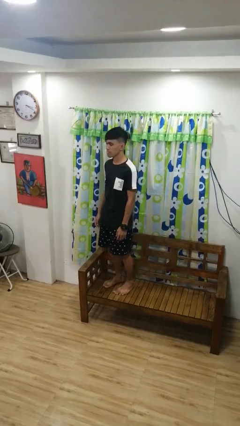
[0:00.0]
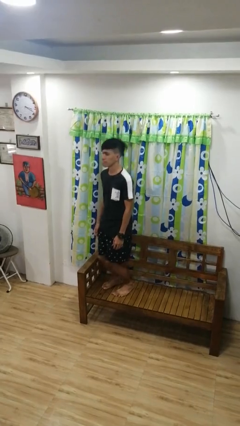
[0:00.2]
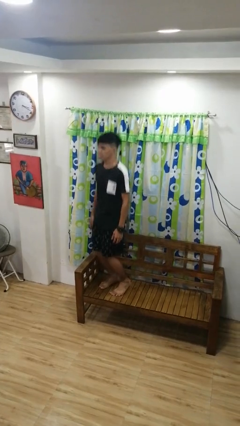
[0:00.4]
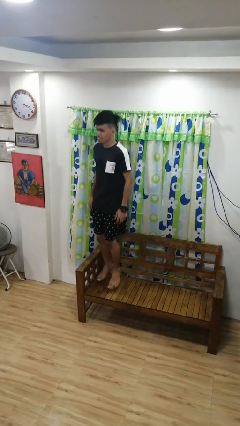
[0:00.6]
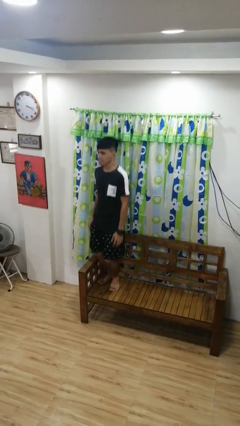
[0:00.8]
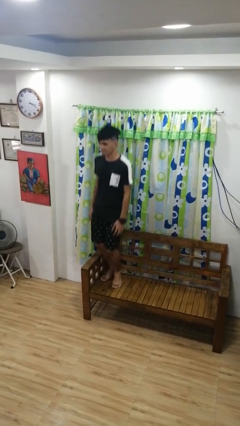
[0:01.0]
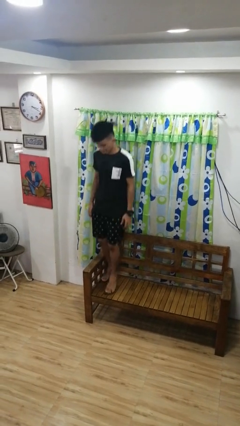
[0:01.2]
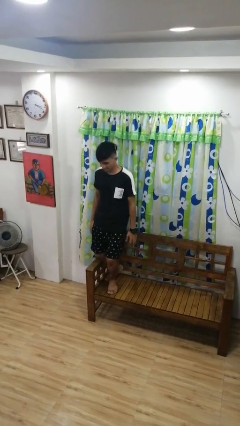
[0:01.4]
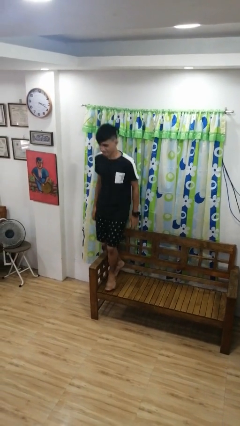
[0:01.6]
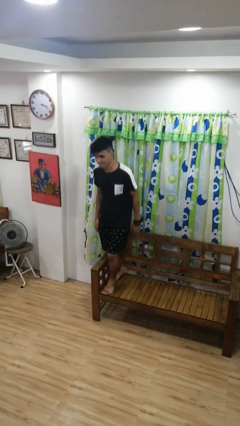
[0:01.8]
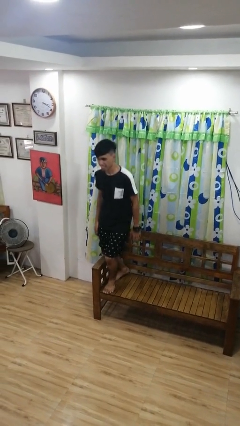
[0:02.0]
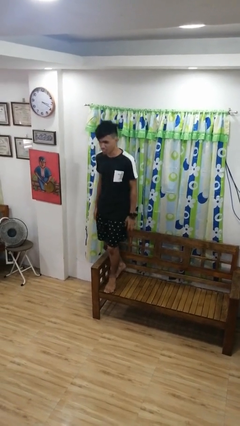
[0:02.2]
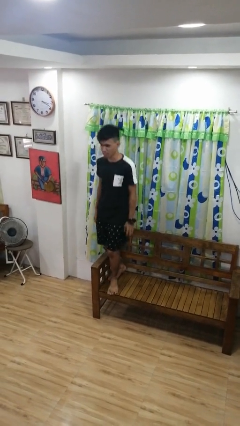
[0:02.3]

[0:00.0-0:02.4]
person jumps on couch

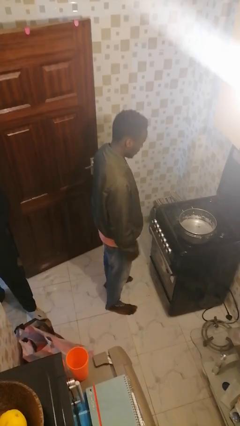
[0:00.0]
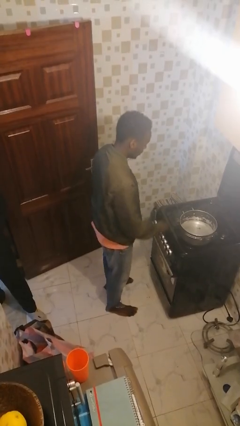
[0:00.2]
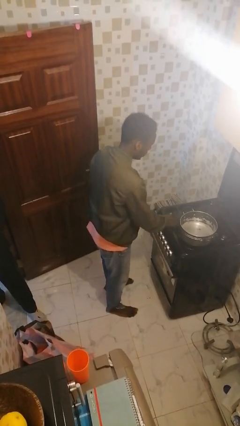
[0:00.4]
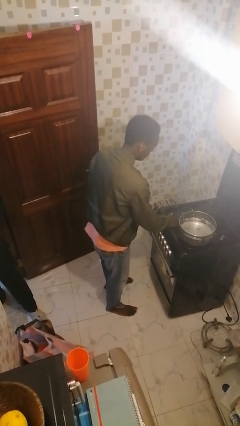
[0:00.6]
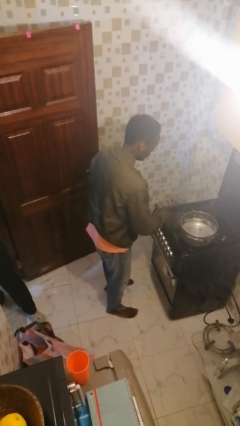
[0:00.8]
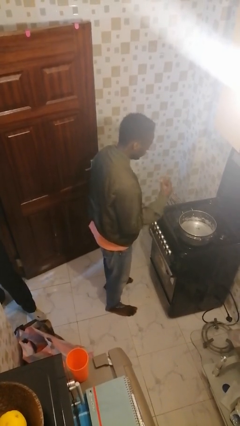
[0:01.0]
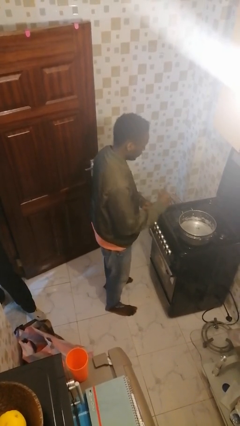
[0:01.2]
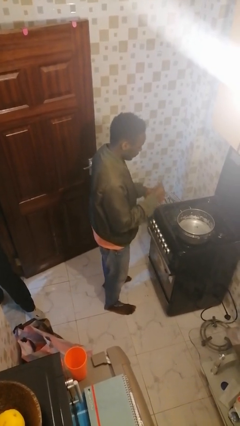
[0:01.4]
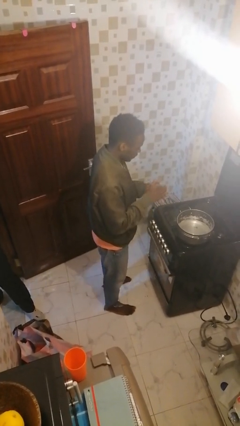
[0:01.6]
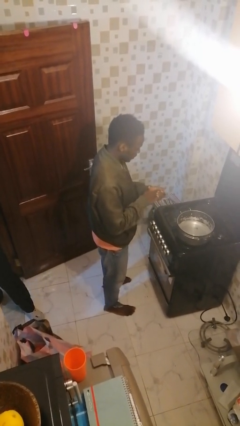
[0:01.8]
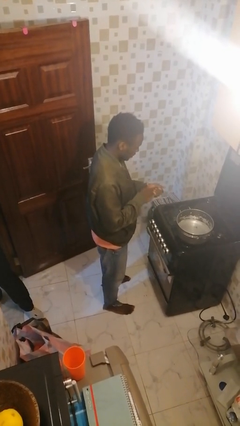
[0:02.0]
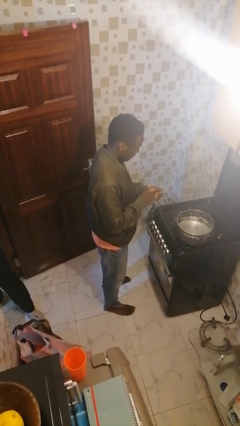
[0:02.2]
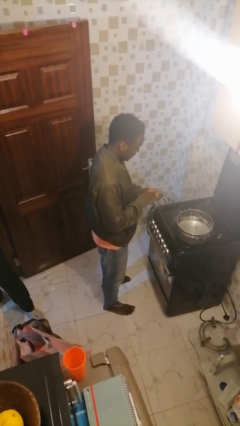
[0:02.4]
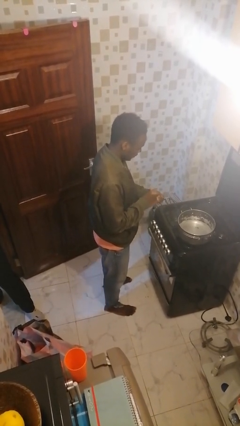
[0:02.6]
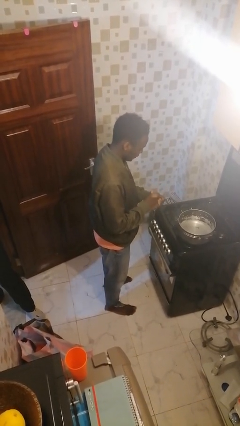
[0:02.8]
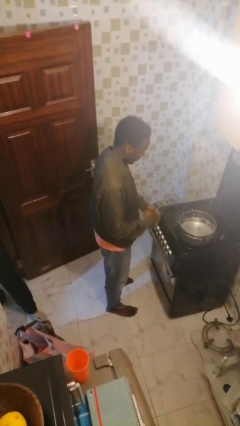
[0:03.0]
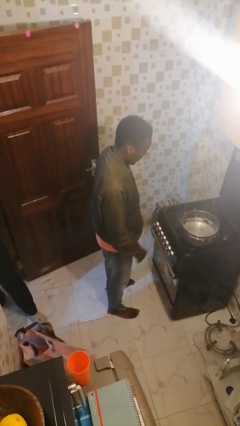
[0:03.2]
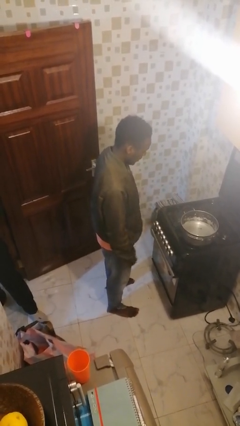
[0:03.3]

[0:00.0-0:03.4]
person burns hand

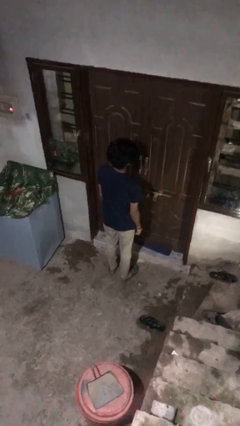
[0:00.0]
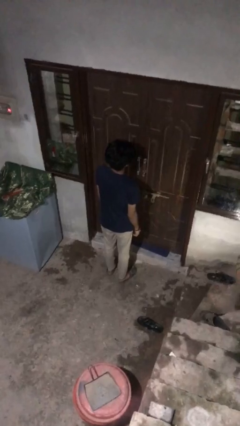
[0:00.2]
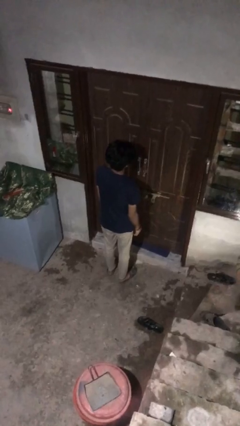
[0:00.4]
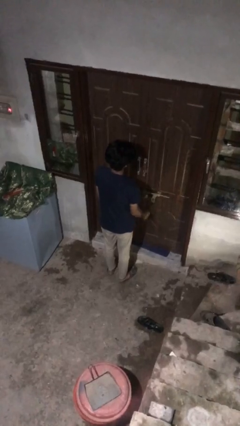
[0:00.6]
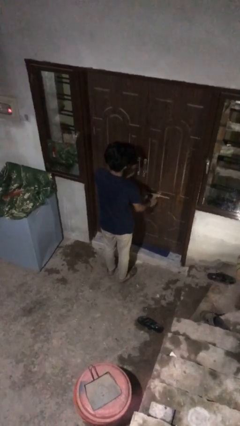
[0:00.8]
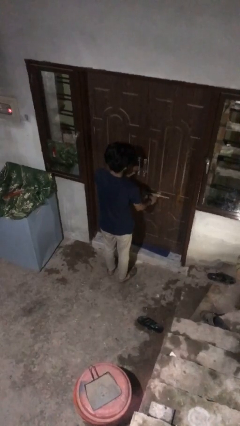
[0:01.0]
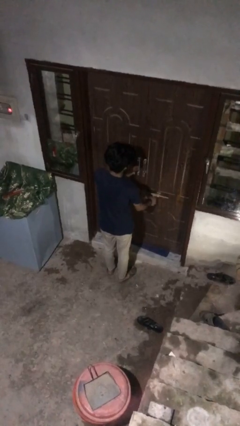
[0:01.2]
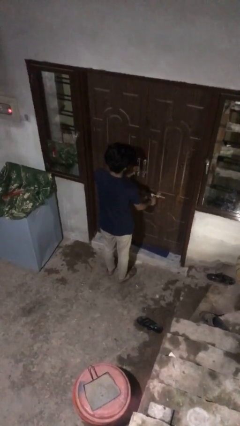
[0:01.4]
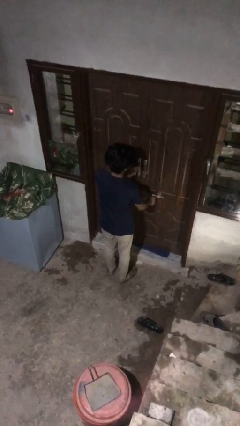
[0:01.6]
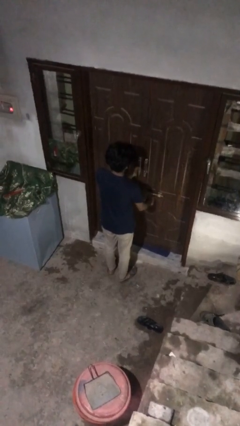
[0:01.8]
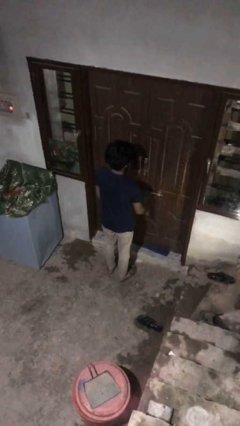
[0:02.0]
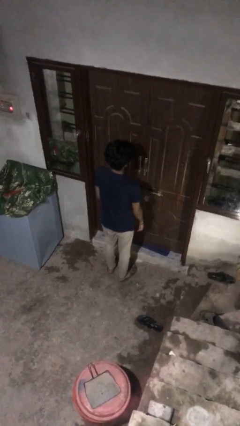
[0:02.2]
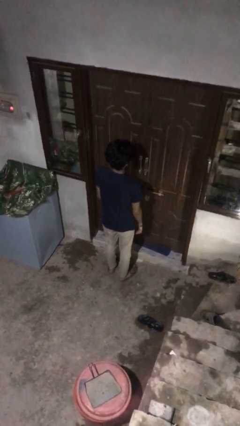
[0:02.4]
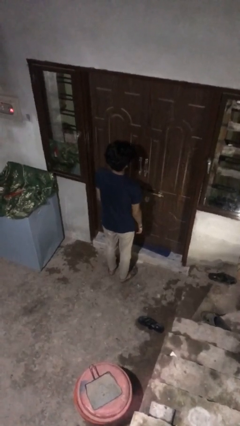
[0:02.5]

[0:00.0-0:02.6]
person locks door with keys

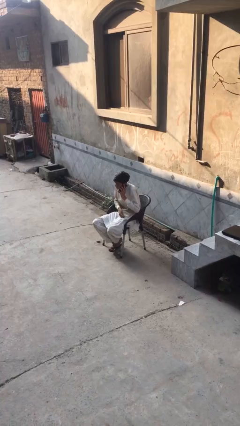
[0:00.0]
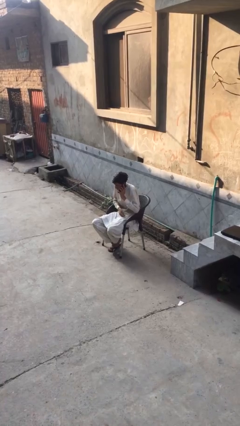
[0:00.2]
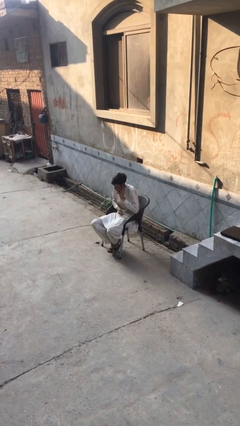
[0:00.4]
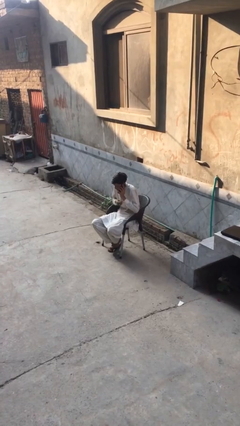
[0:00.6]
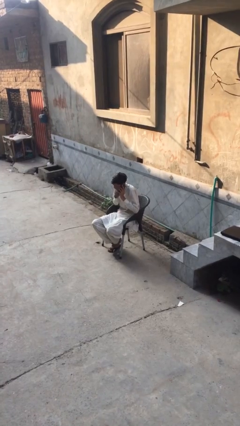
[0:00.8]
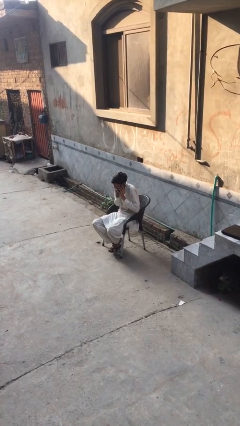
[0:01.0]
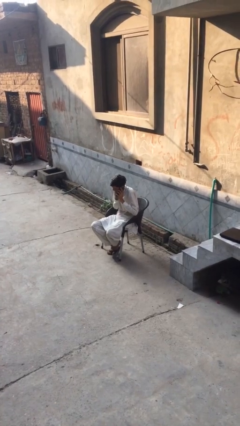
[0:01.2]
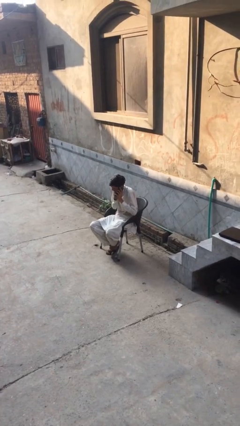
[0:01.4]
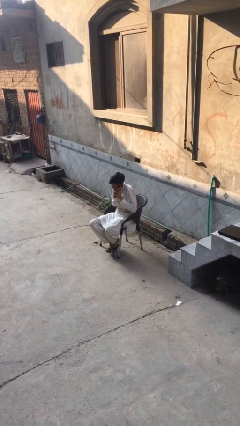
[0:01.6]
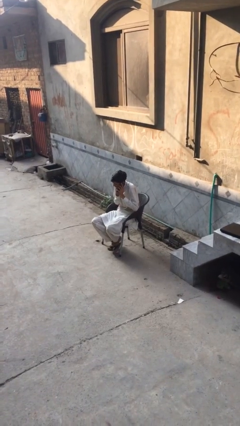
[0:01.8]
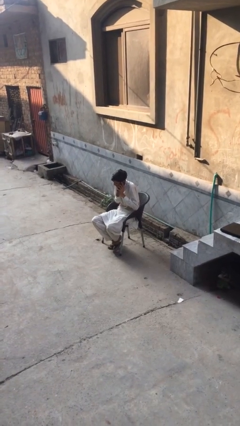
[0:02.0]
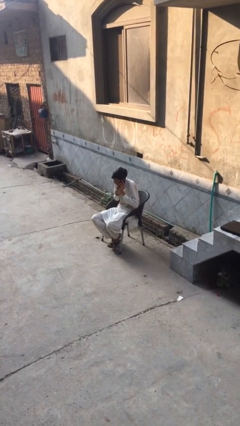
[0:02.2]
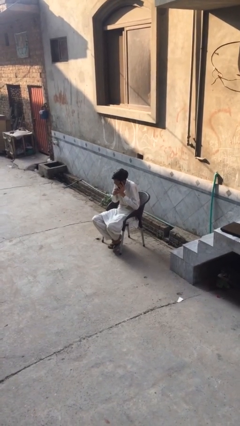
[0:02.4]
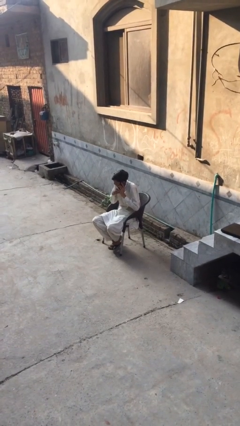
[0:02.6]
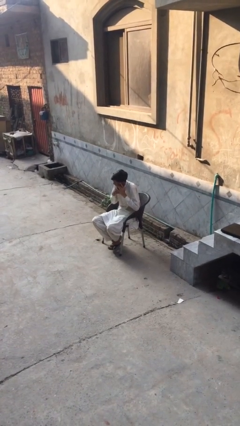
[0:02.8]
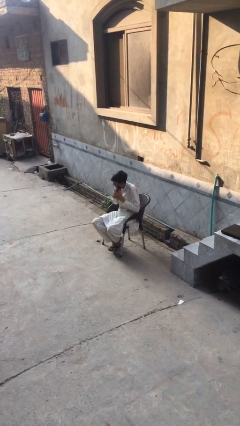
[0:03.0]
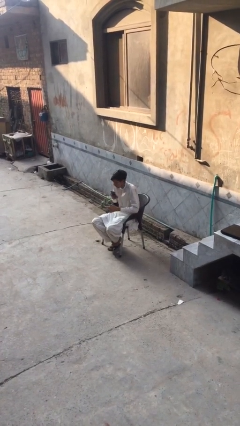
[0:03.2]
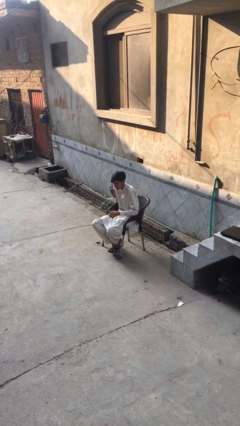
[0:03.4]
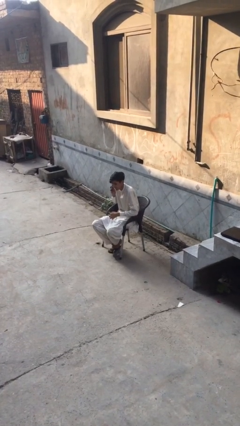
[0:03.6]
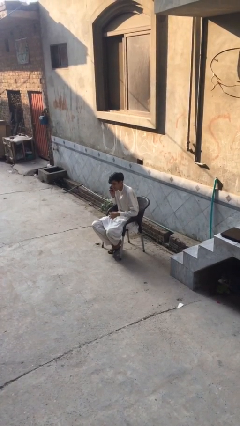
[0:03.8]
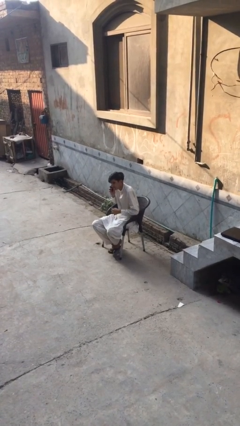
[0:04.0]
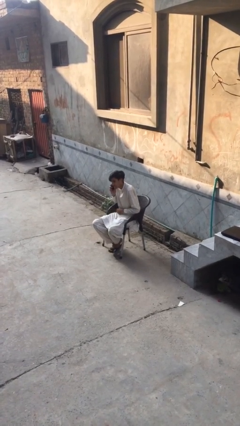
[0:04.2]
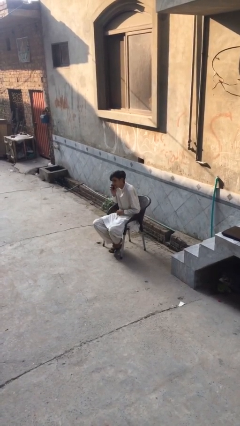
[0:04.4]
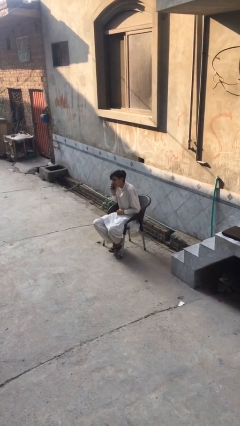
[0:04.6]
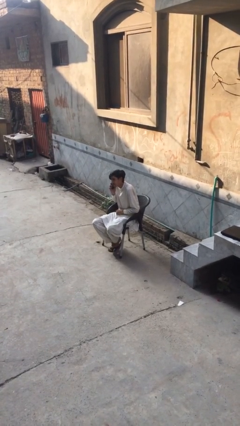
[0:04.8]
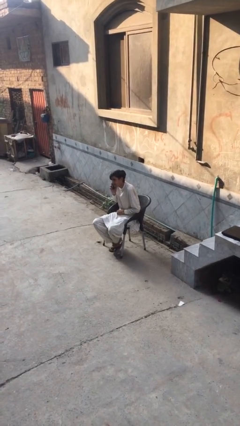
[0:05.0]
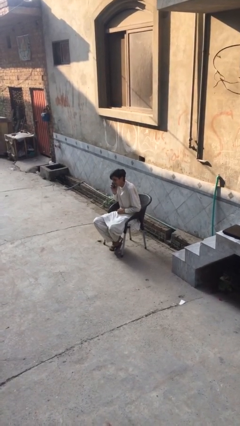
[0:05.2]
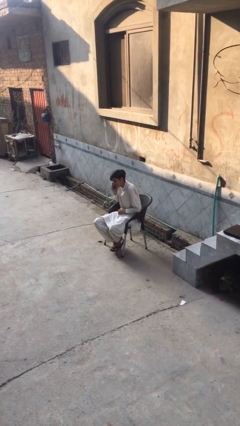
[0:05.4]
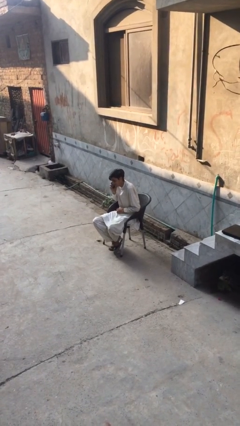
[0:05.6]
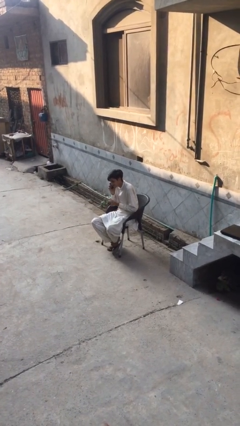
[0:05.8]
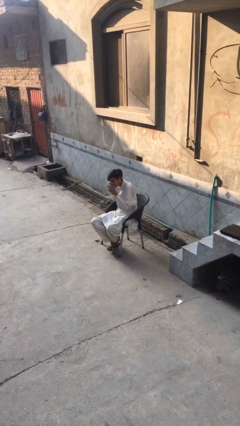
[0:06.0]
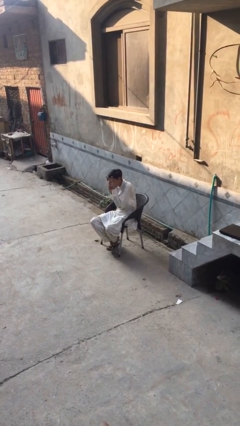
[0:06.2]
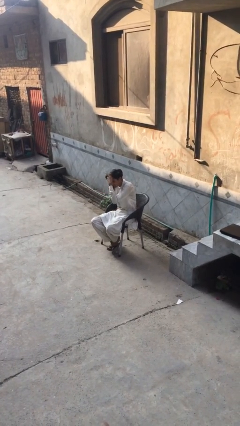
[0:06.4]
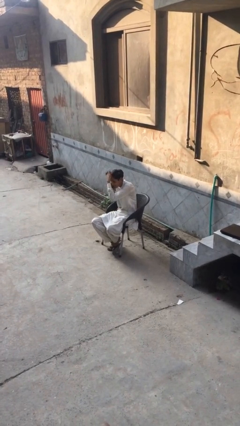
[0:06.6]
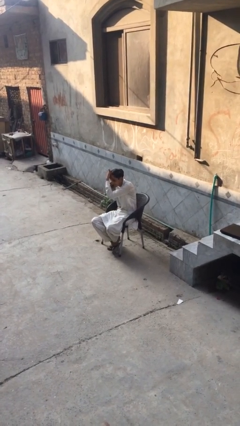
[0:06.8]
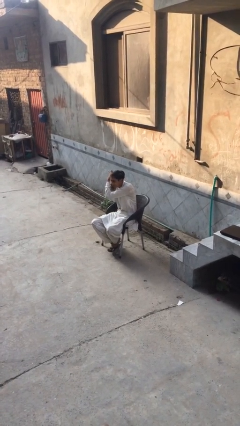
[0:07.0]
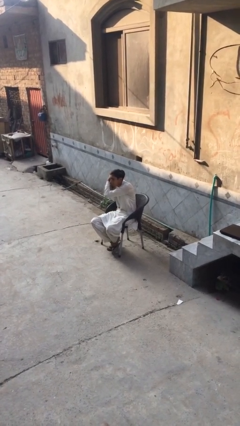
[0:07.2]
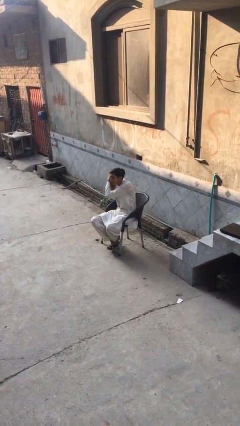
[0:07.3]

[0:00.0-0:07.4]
person talks on phone

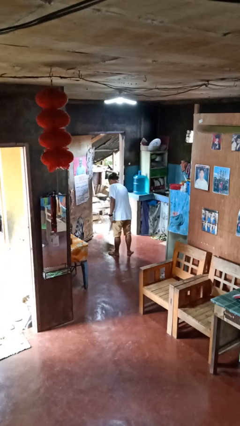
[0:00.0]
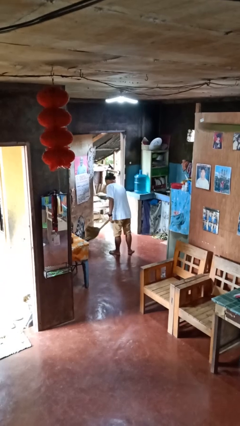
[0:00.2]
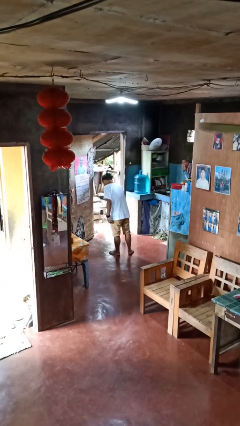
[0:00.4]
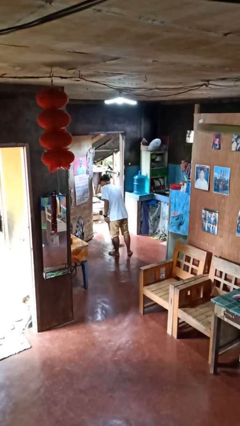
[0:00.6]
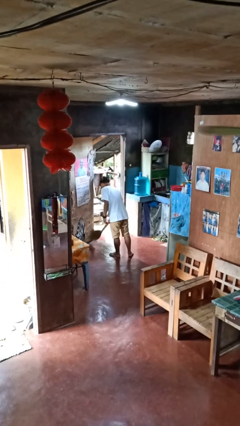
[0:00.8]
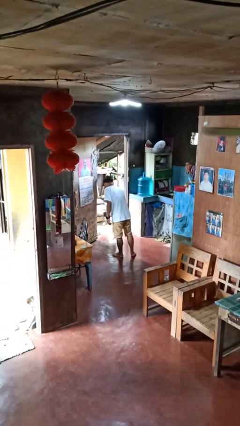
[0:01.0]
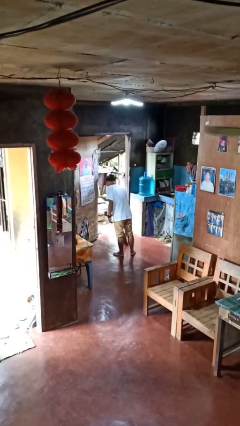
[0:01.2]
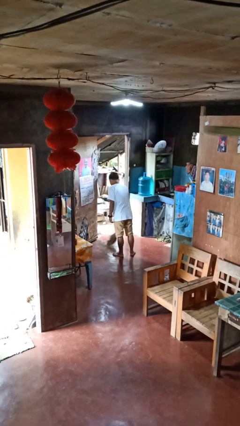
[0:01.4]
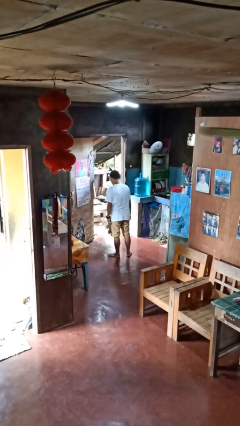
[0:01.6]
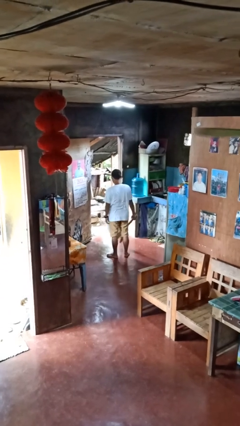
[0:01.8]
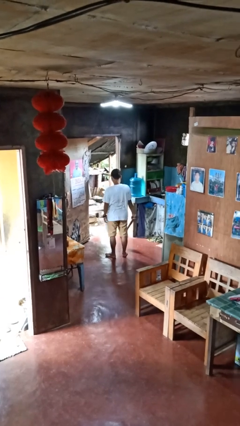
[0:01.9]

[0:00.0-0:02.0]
person sweeps floor
